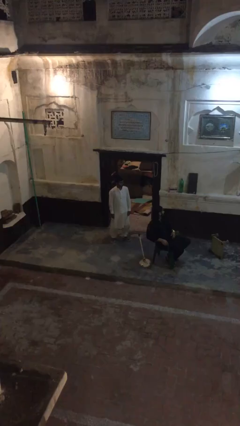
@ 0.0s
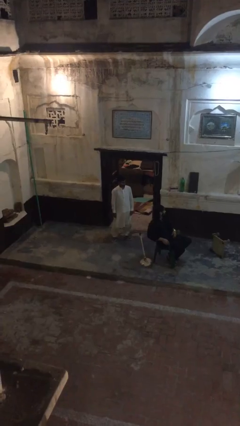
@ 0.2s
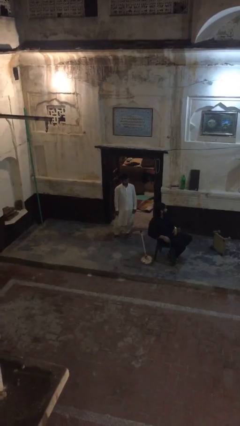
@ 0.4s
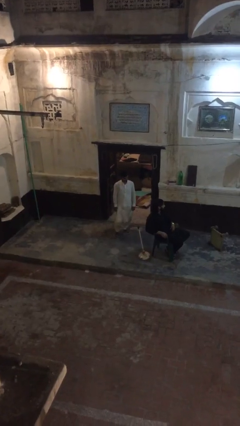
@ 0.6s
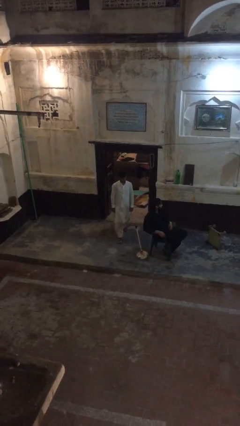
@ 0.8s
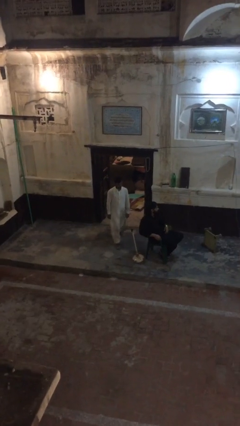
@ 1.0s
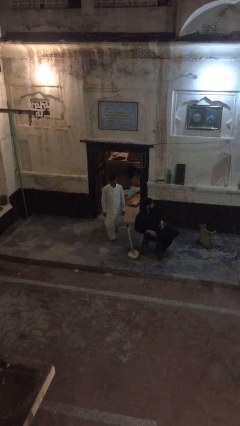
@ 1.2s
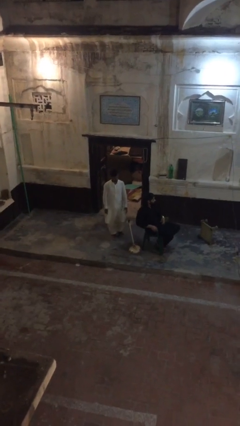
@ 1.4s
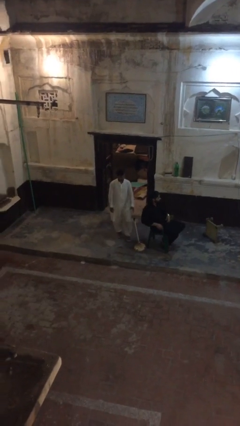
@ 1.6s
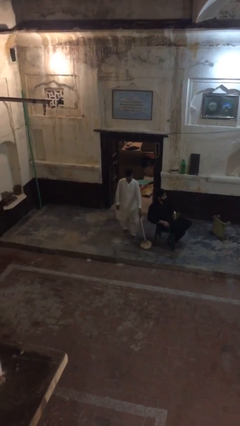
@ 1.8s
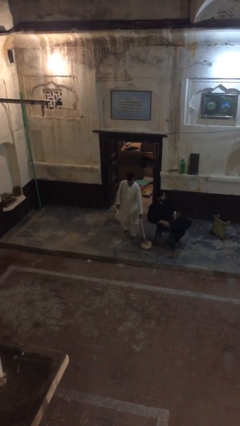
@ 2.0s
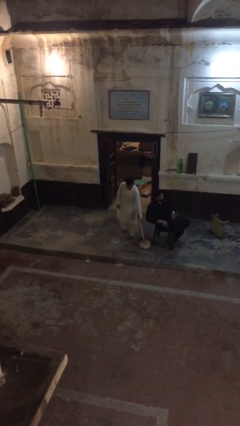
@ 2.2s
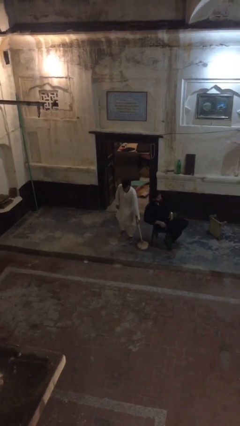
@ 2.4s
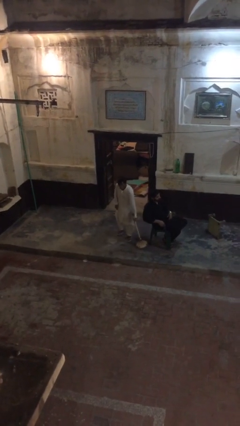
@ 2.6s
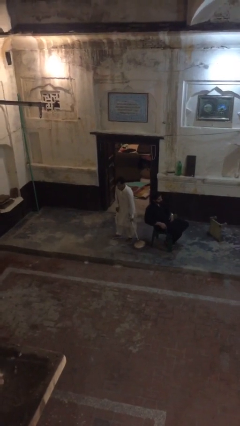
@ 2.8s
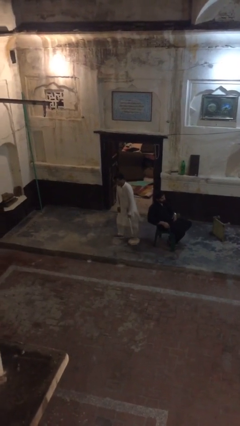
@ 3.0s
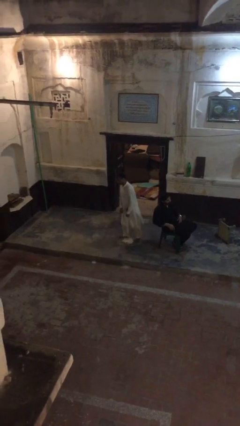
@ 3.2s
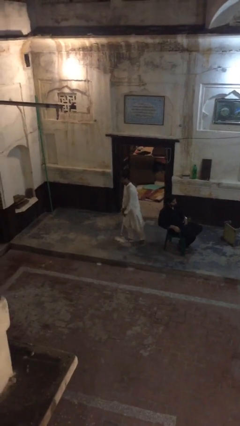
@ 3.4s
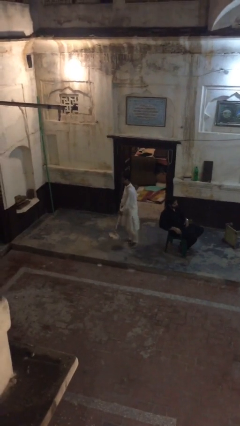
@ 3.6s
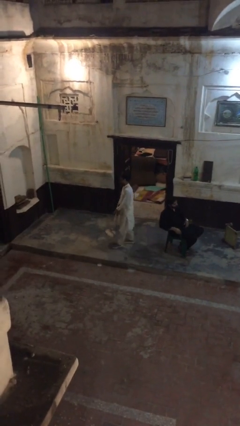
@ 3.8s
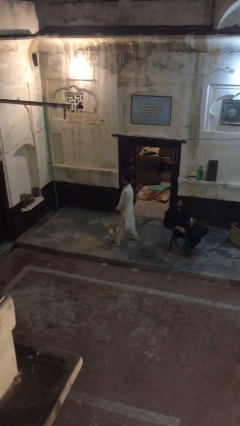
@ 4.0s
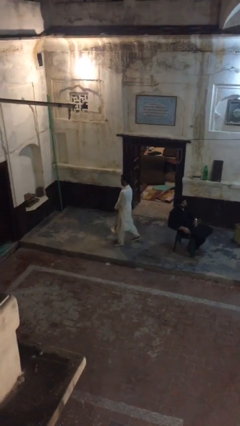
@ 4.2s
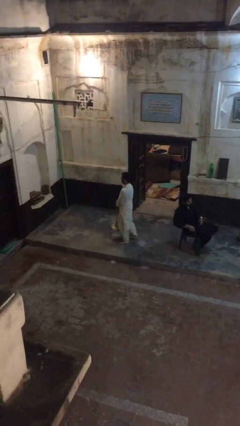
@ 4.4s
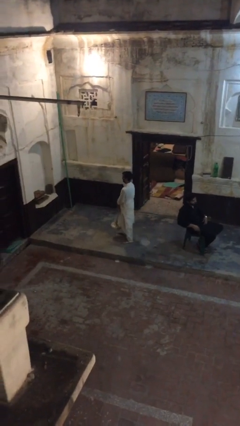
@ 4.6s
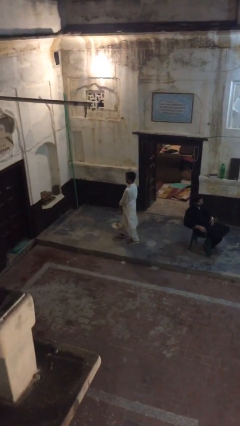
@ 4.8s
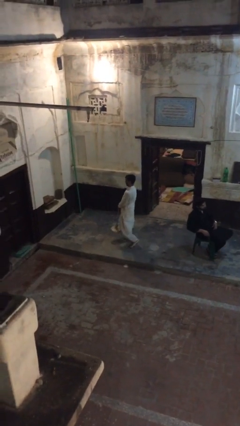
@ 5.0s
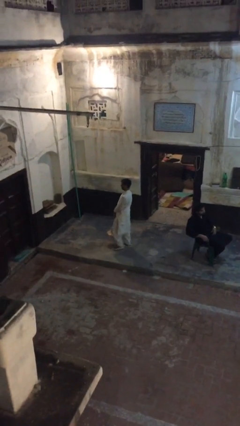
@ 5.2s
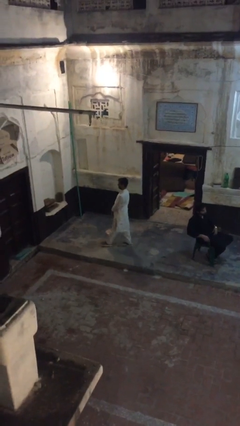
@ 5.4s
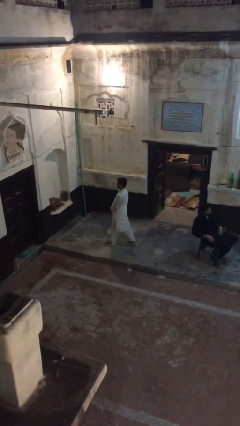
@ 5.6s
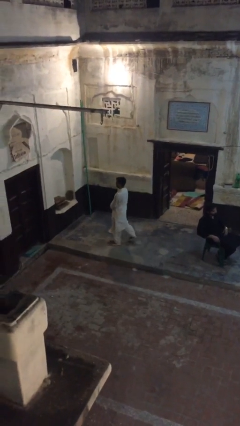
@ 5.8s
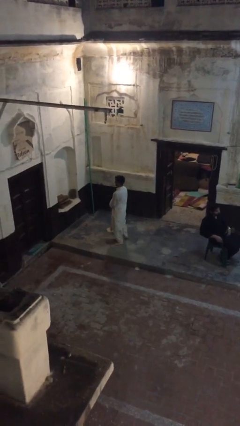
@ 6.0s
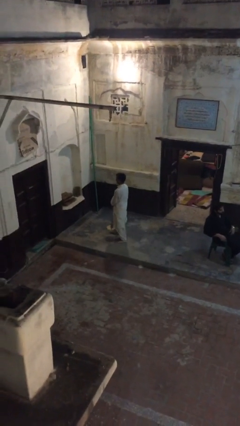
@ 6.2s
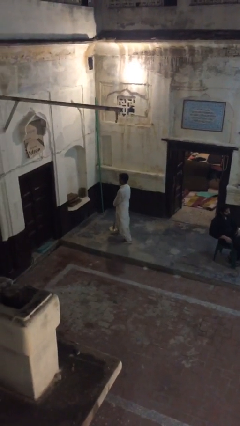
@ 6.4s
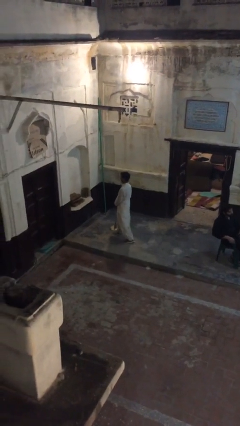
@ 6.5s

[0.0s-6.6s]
person steals object from person

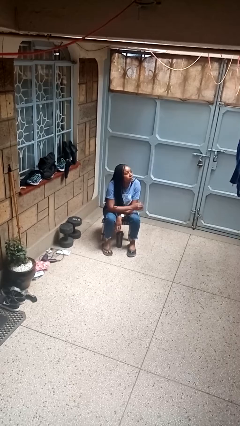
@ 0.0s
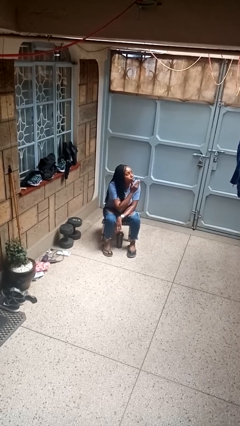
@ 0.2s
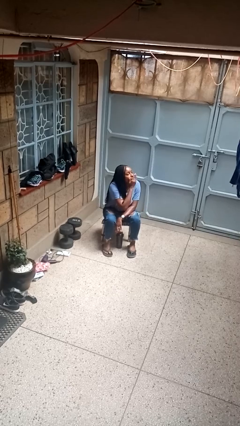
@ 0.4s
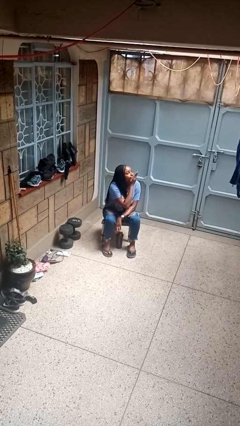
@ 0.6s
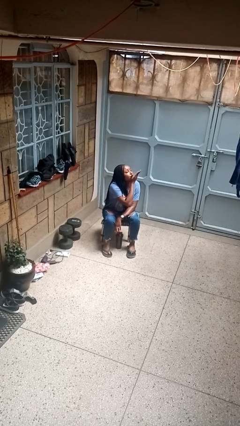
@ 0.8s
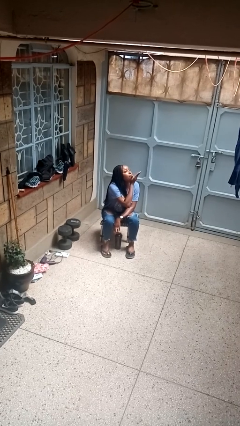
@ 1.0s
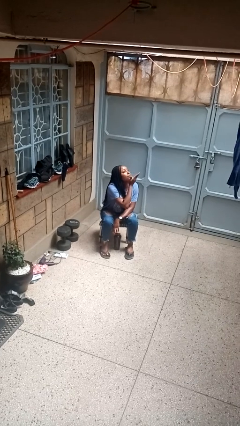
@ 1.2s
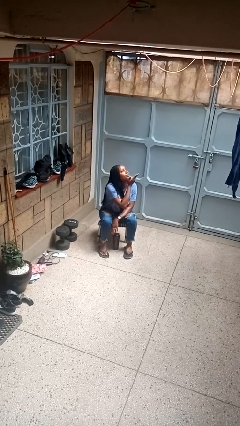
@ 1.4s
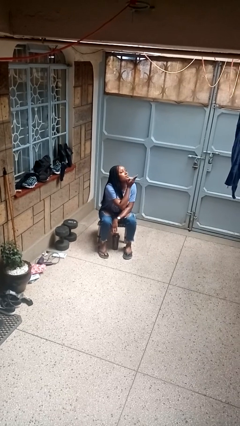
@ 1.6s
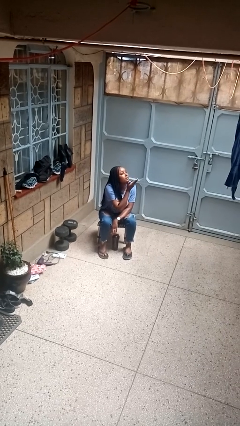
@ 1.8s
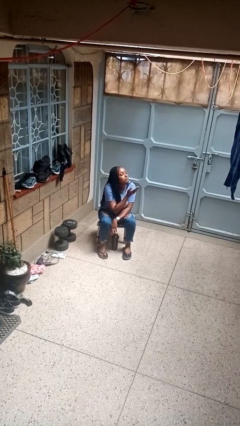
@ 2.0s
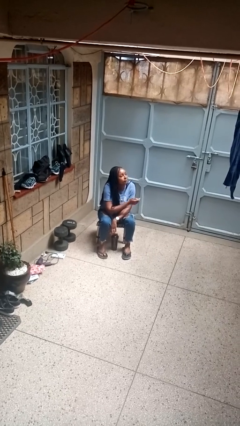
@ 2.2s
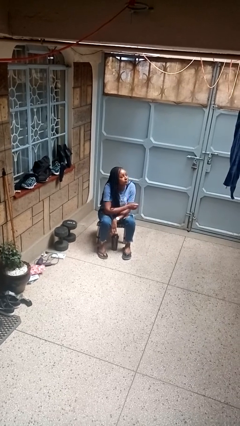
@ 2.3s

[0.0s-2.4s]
person gestures blow kiss

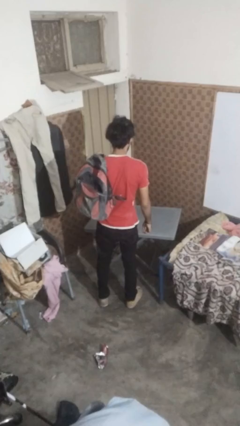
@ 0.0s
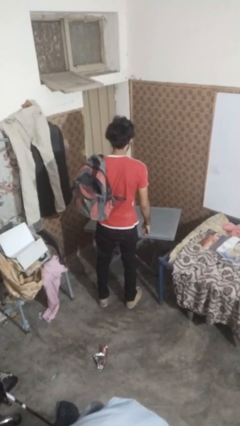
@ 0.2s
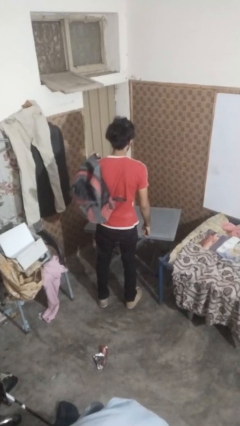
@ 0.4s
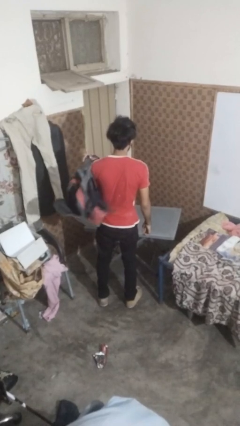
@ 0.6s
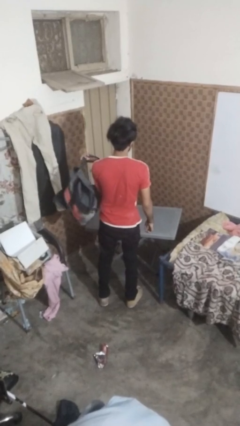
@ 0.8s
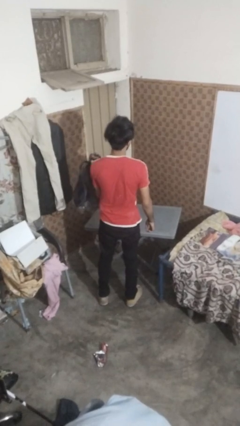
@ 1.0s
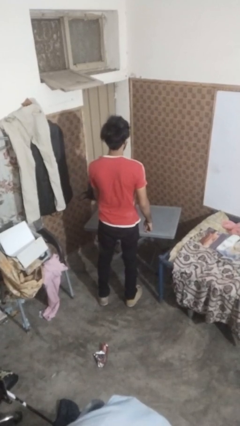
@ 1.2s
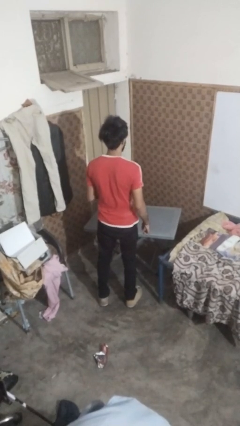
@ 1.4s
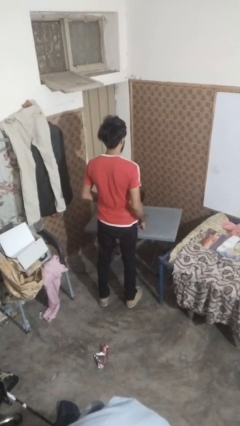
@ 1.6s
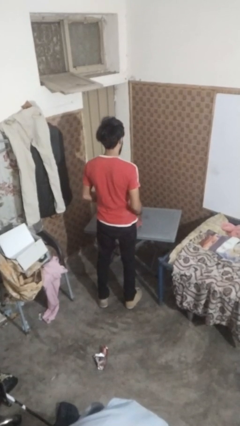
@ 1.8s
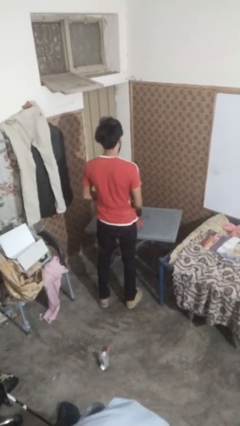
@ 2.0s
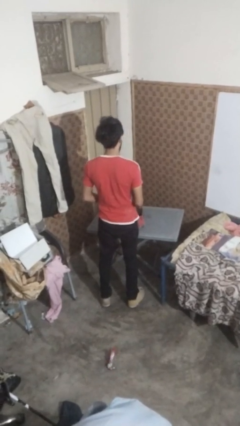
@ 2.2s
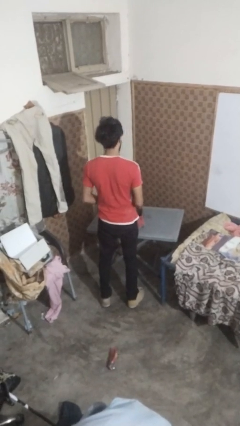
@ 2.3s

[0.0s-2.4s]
person takes off backpack

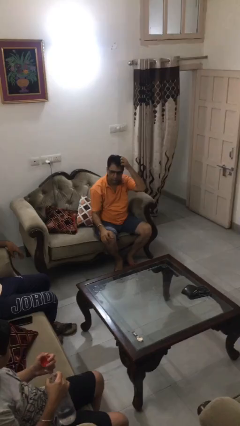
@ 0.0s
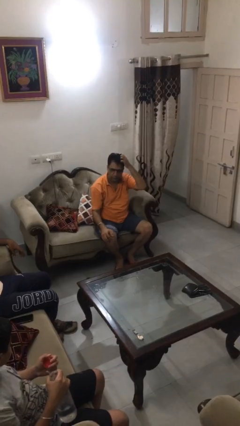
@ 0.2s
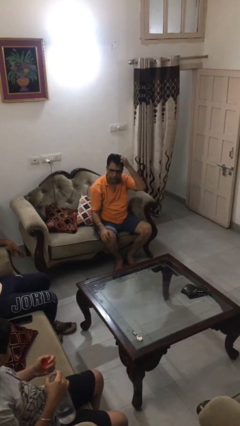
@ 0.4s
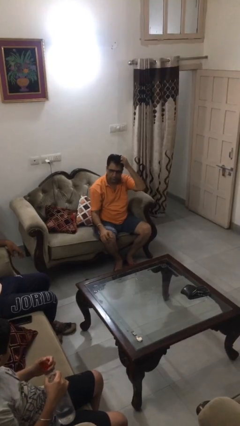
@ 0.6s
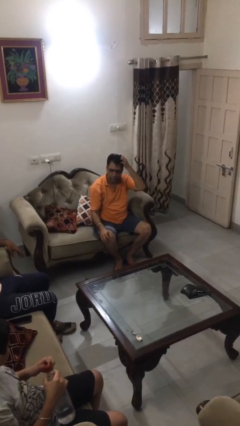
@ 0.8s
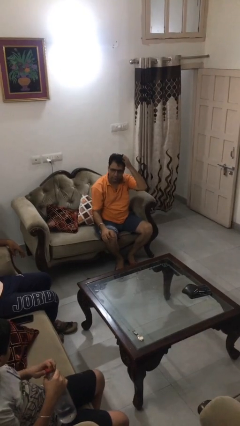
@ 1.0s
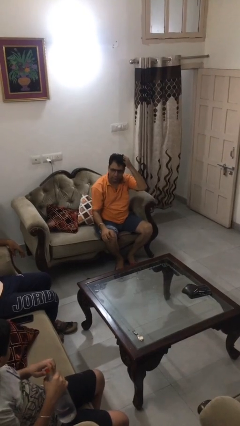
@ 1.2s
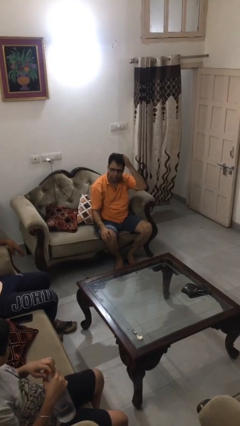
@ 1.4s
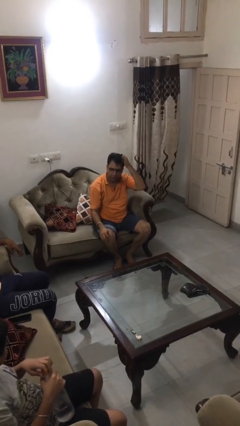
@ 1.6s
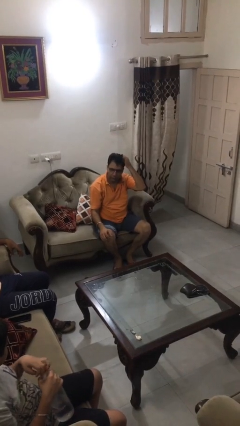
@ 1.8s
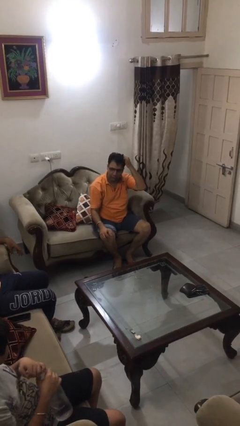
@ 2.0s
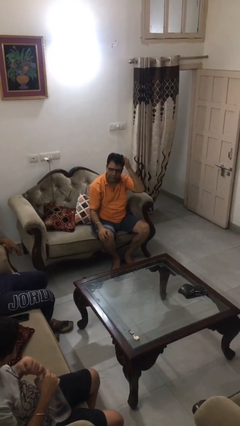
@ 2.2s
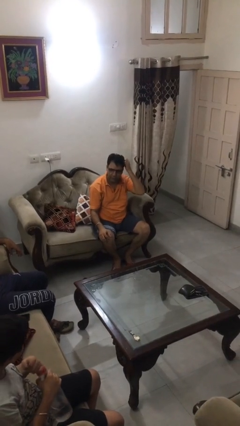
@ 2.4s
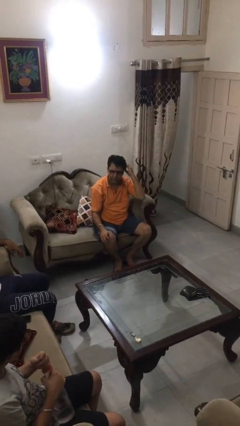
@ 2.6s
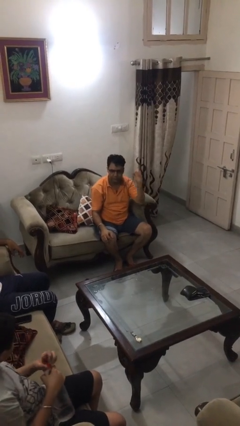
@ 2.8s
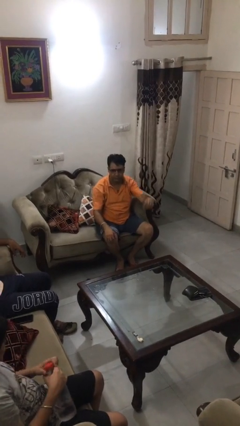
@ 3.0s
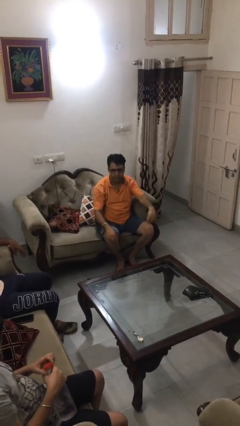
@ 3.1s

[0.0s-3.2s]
person scratches face

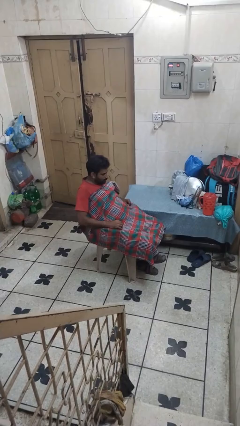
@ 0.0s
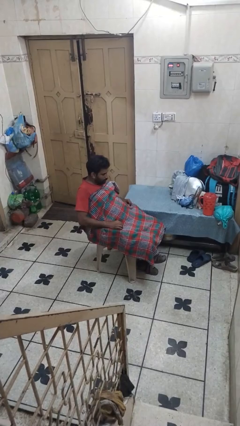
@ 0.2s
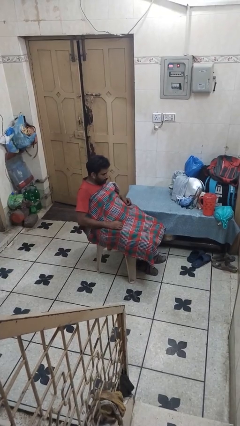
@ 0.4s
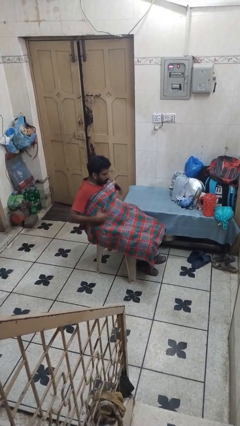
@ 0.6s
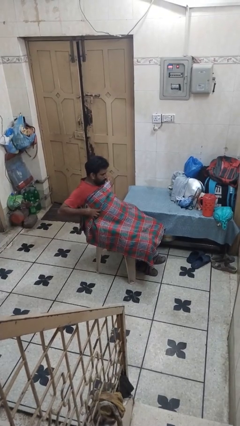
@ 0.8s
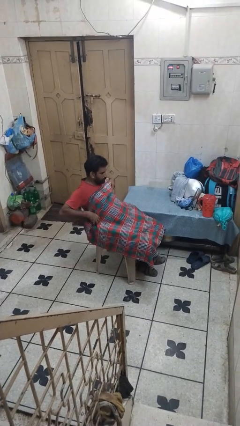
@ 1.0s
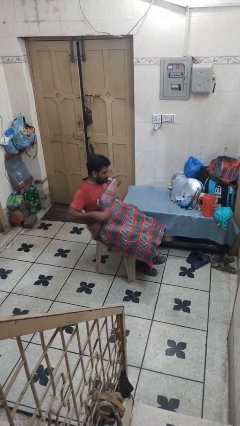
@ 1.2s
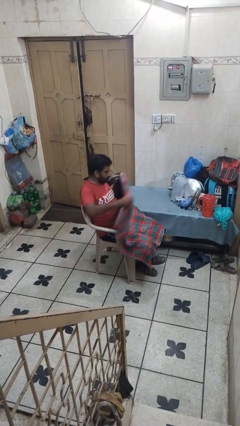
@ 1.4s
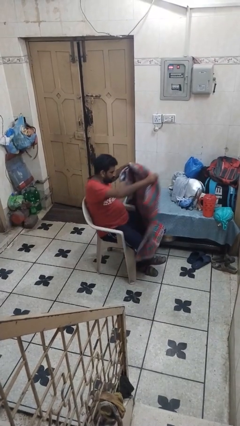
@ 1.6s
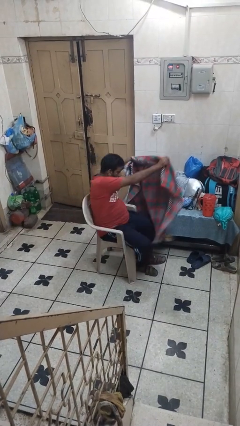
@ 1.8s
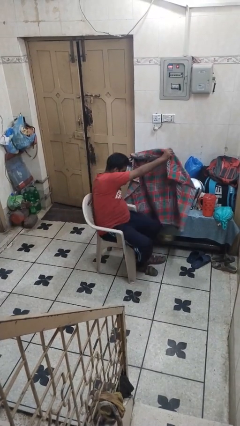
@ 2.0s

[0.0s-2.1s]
person uncovers with blanket

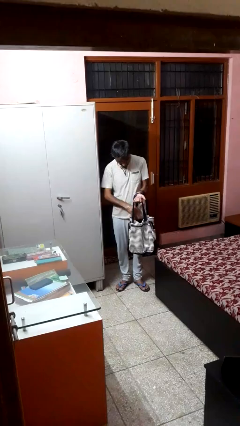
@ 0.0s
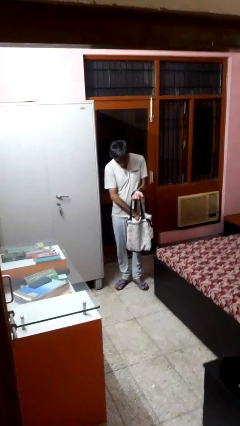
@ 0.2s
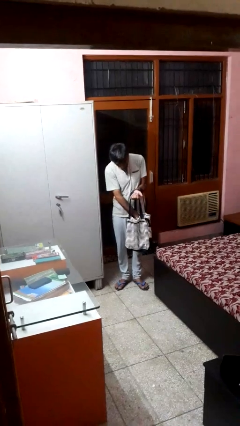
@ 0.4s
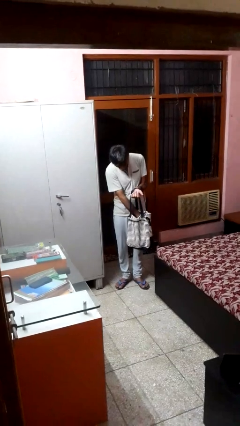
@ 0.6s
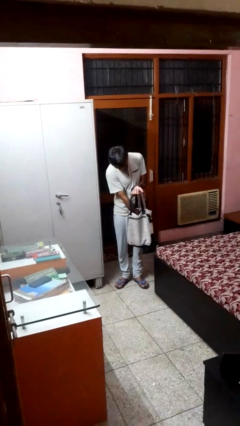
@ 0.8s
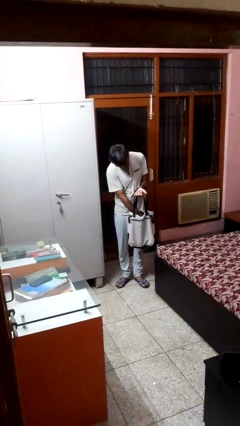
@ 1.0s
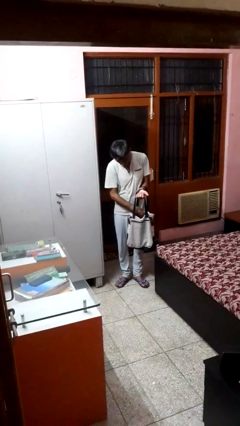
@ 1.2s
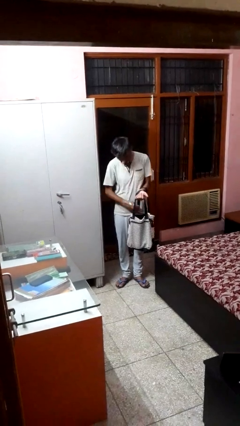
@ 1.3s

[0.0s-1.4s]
person puts object into bag
